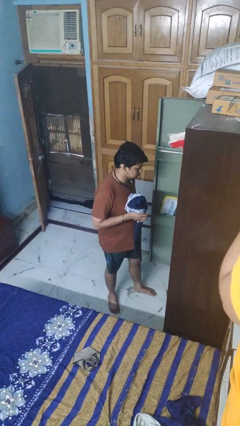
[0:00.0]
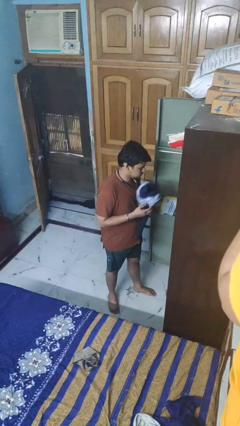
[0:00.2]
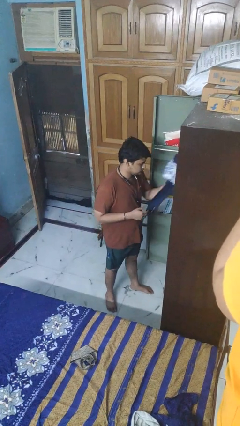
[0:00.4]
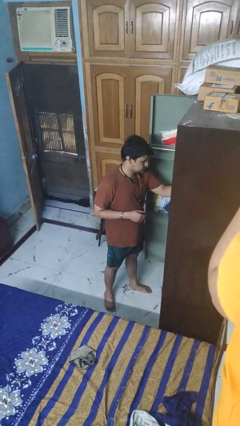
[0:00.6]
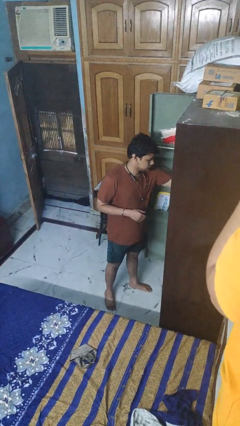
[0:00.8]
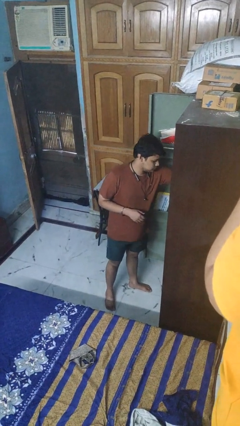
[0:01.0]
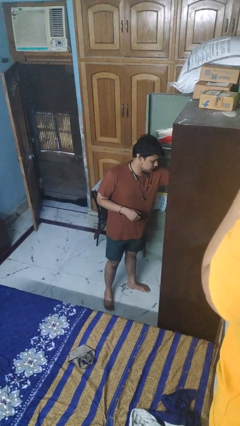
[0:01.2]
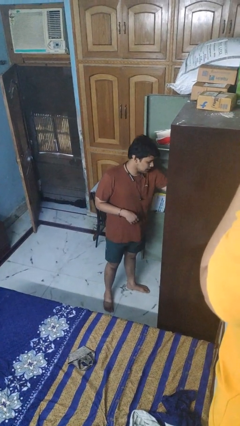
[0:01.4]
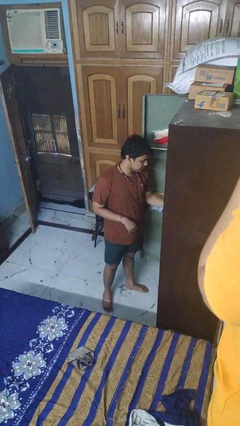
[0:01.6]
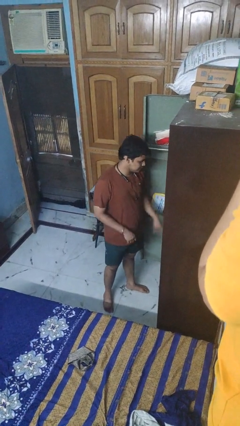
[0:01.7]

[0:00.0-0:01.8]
person puts clothes into dresser

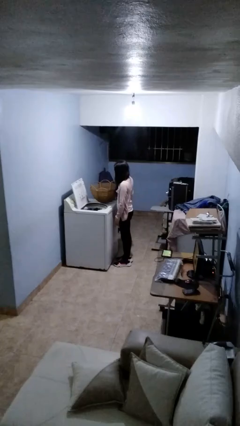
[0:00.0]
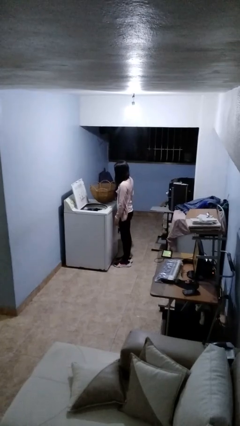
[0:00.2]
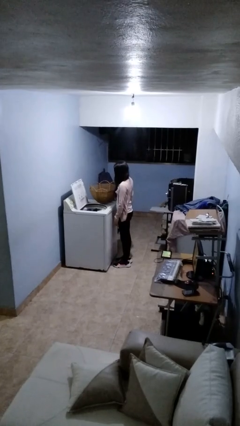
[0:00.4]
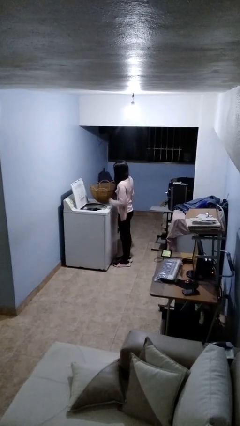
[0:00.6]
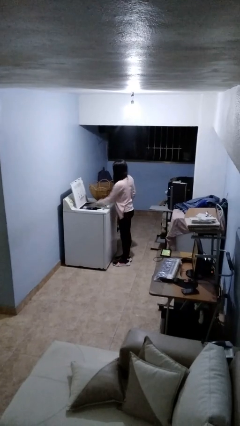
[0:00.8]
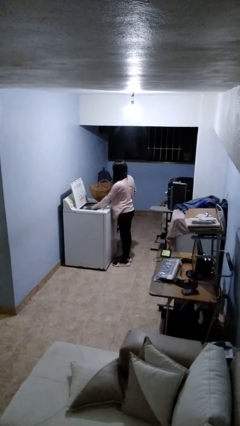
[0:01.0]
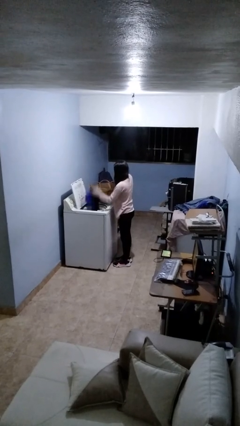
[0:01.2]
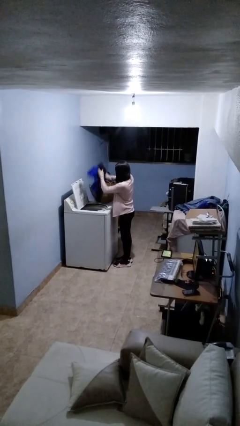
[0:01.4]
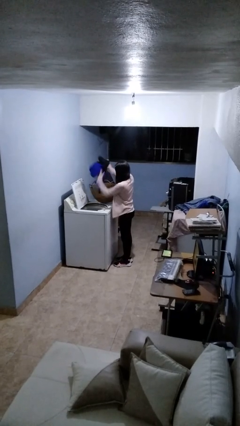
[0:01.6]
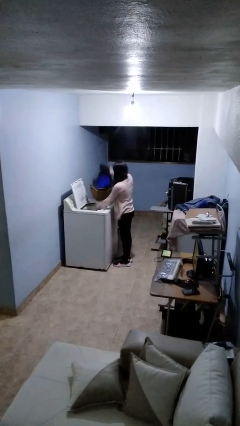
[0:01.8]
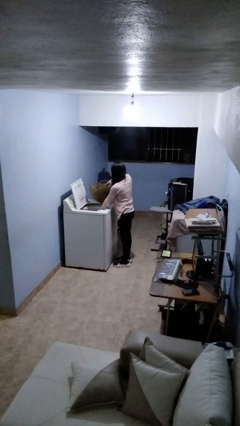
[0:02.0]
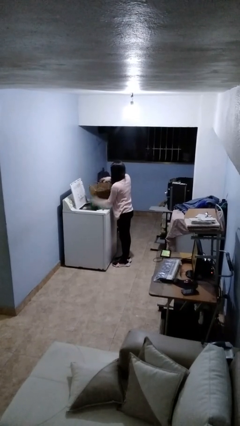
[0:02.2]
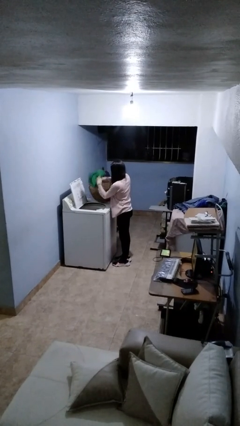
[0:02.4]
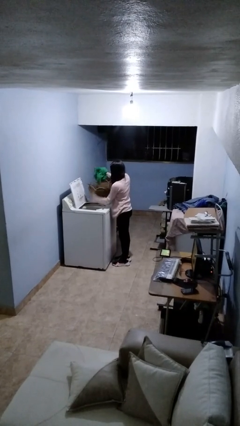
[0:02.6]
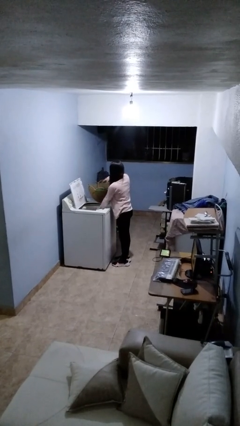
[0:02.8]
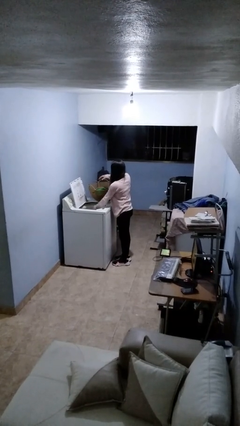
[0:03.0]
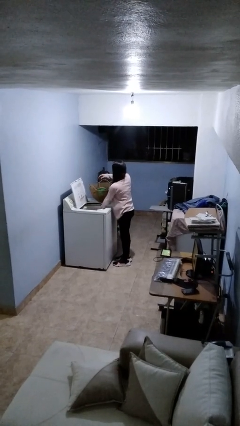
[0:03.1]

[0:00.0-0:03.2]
person loads clotheswasher

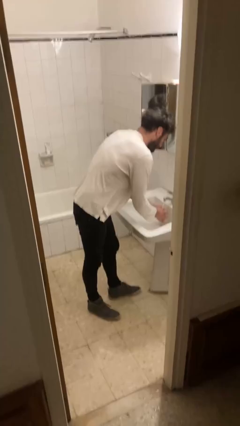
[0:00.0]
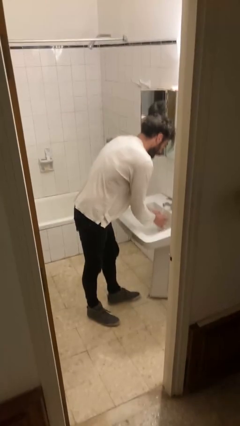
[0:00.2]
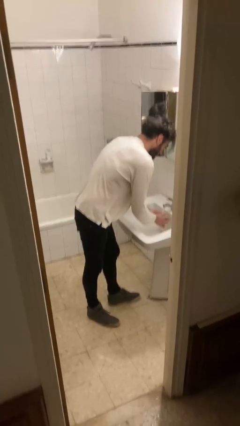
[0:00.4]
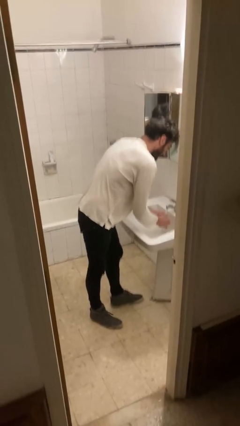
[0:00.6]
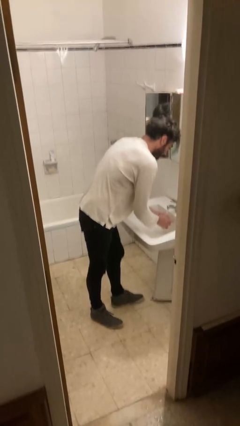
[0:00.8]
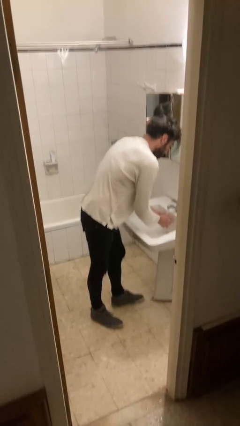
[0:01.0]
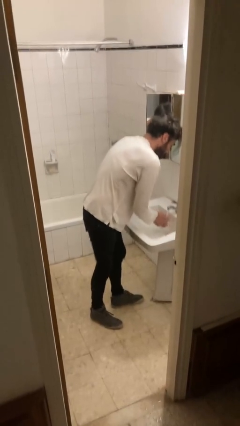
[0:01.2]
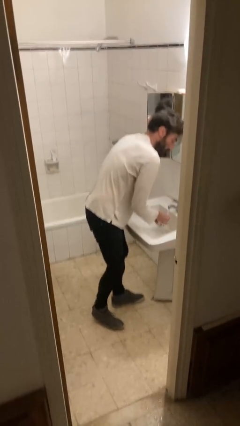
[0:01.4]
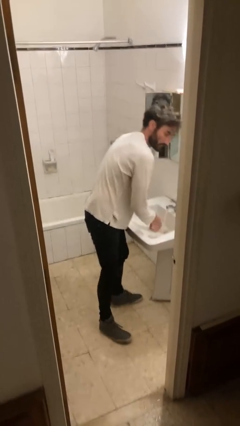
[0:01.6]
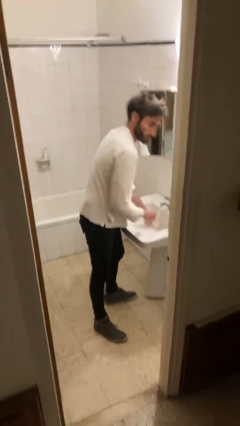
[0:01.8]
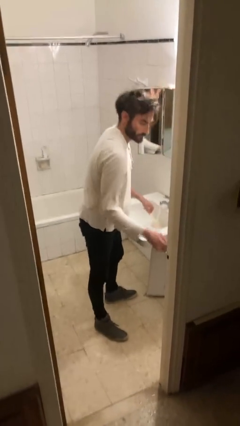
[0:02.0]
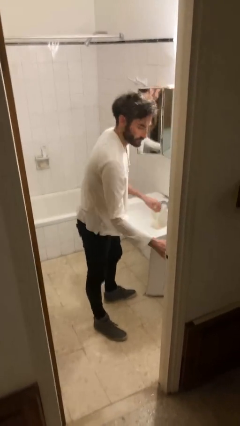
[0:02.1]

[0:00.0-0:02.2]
person washes hands

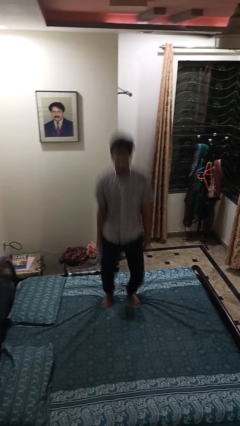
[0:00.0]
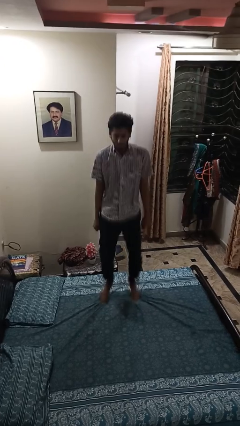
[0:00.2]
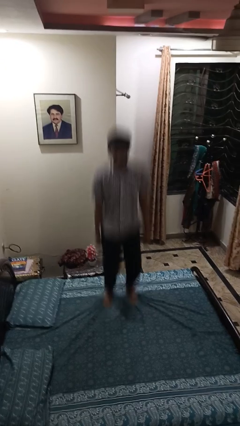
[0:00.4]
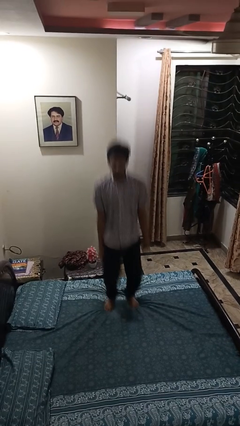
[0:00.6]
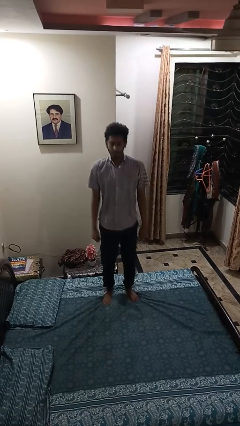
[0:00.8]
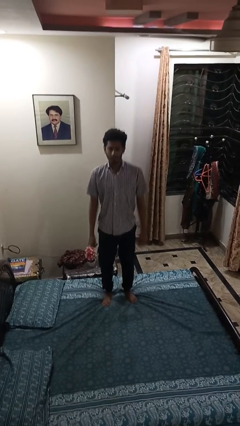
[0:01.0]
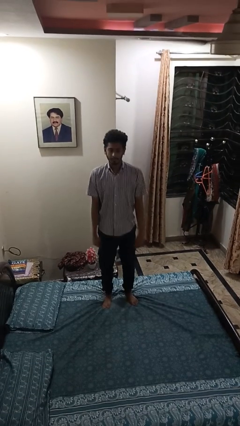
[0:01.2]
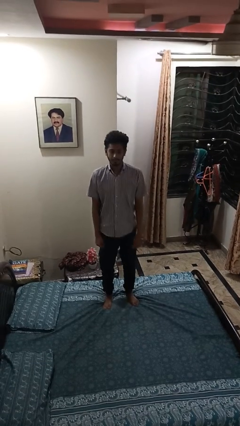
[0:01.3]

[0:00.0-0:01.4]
person jumps on bed

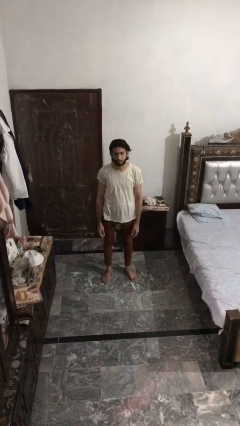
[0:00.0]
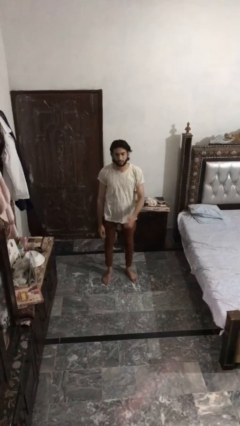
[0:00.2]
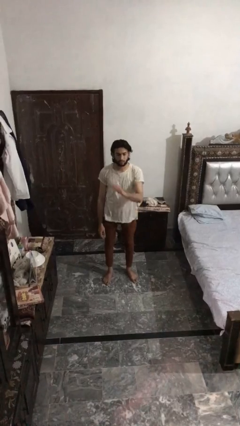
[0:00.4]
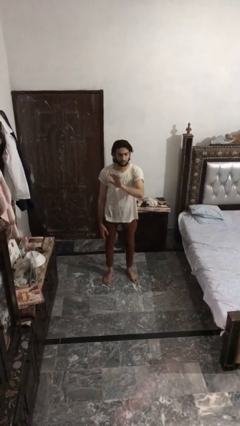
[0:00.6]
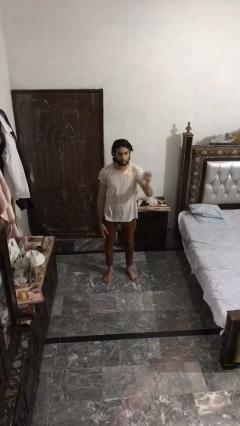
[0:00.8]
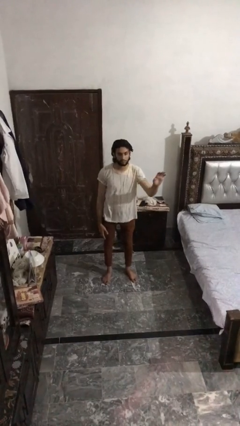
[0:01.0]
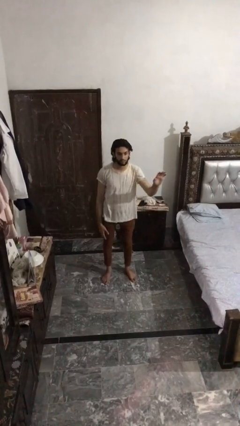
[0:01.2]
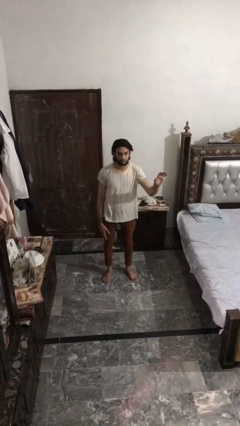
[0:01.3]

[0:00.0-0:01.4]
person gestures swipe left

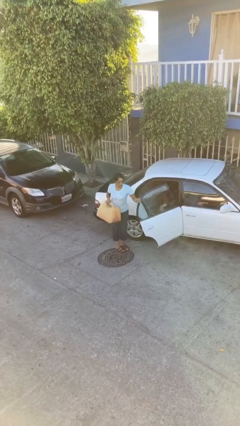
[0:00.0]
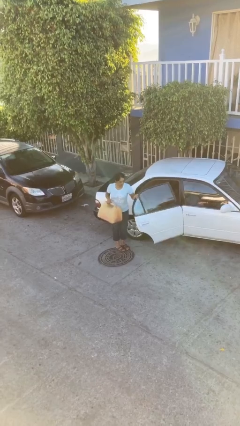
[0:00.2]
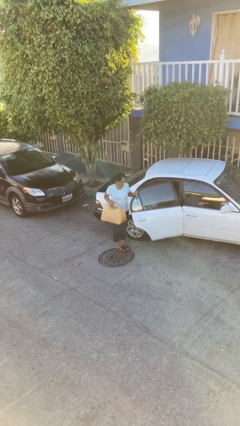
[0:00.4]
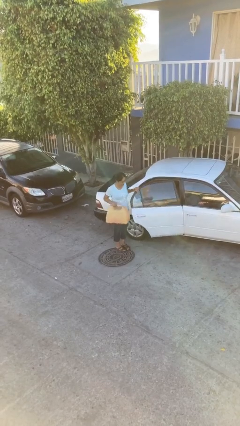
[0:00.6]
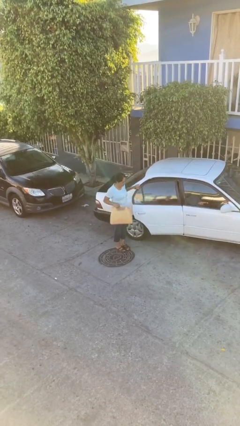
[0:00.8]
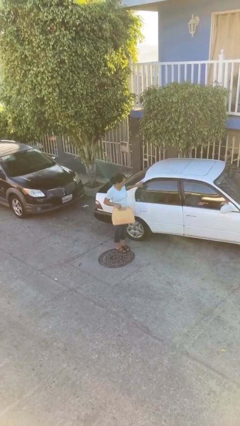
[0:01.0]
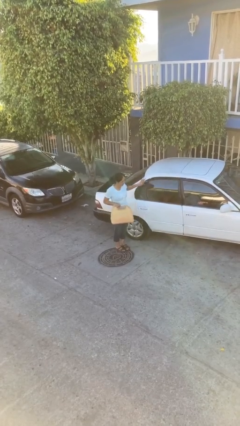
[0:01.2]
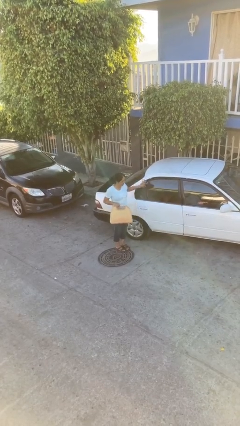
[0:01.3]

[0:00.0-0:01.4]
person closes car door

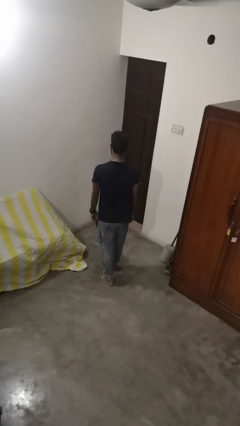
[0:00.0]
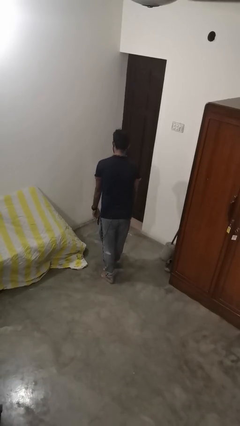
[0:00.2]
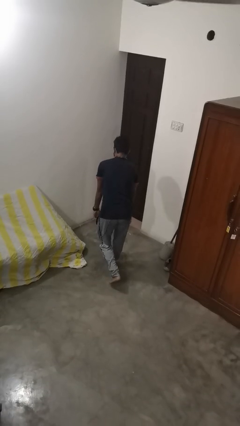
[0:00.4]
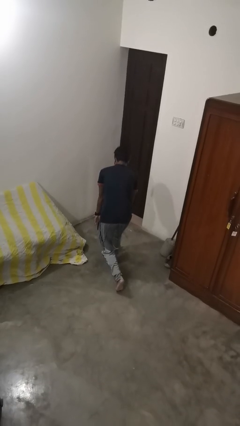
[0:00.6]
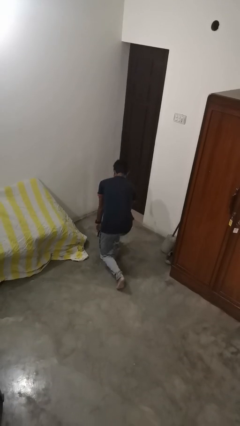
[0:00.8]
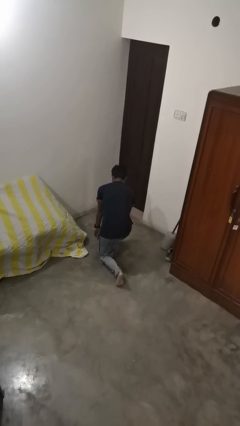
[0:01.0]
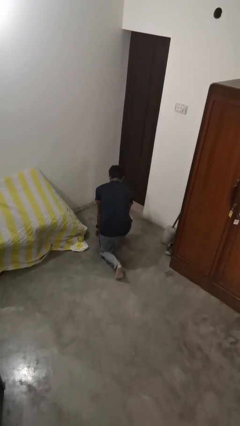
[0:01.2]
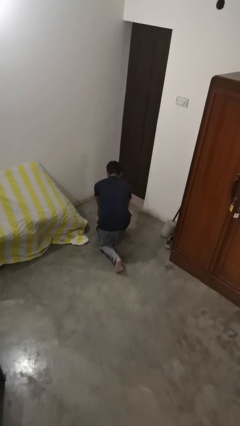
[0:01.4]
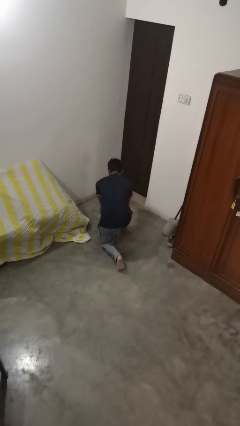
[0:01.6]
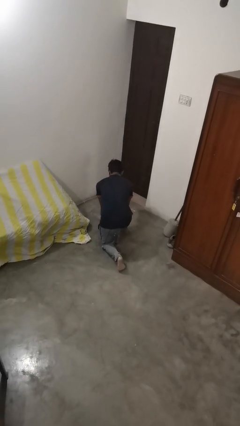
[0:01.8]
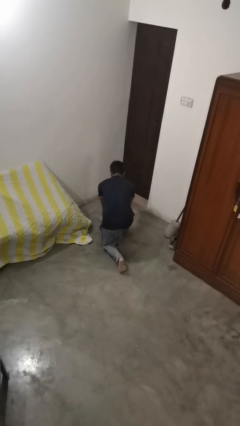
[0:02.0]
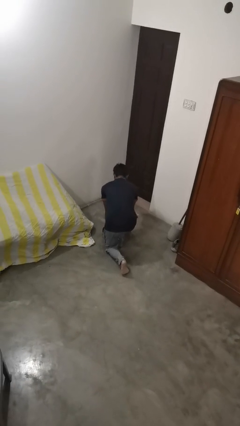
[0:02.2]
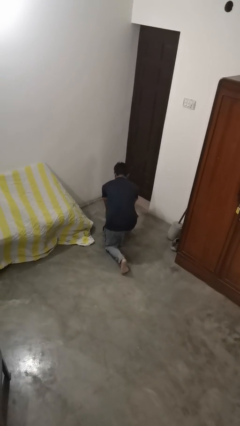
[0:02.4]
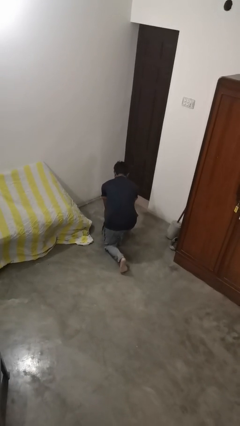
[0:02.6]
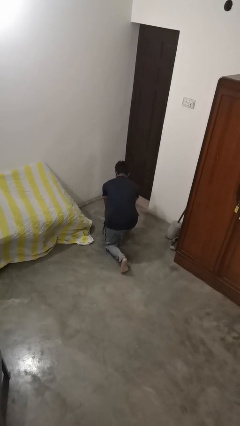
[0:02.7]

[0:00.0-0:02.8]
person kneels

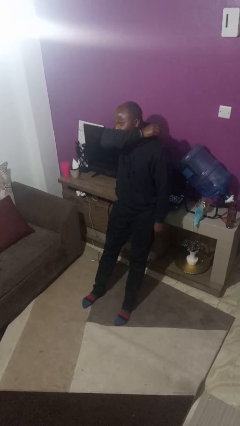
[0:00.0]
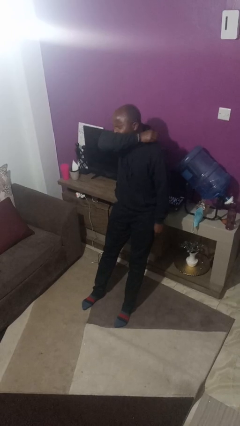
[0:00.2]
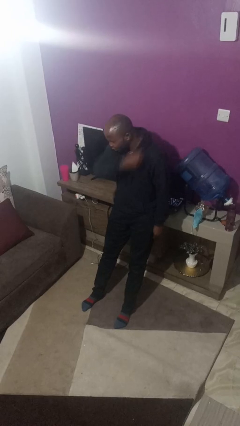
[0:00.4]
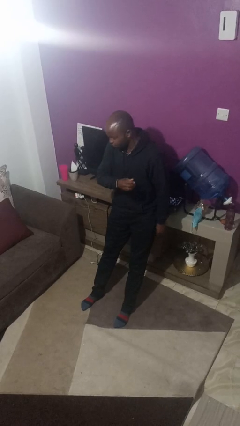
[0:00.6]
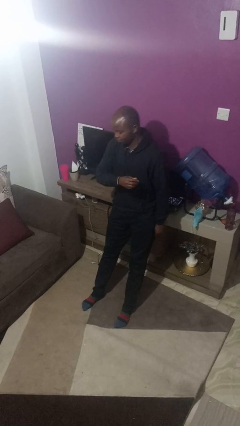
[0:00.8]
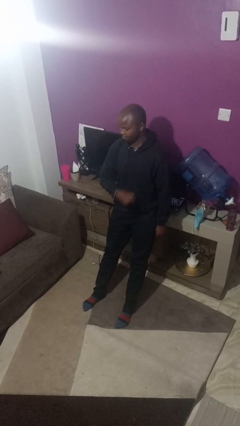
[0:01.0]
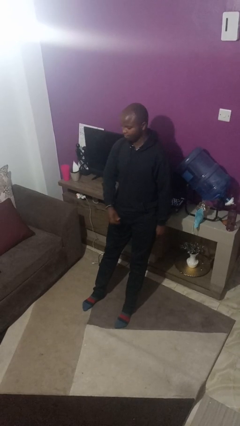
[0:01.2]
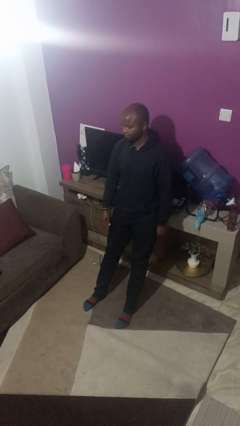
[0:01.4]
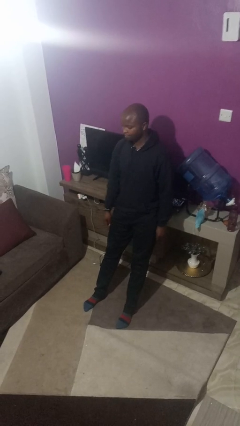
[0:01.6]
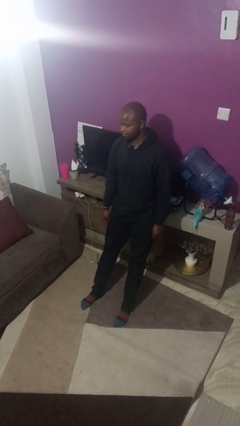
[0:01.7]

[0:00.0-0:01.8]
person sneezes into hand

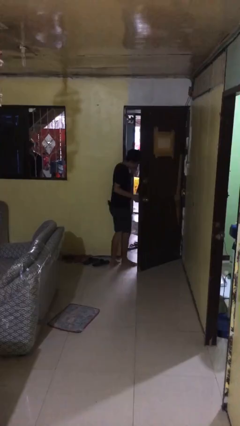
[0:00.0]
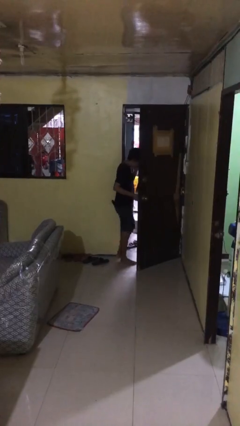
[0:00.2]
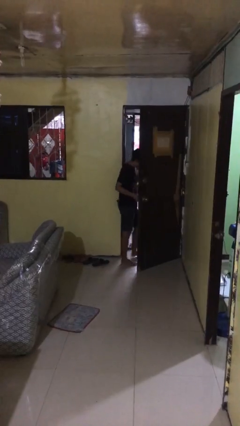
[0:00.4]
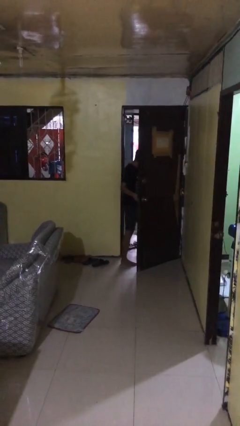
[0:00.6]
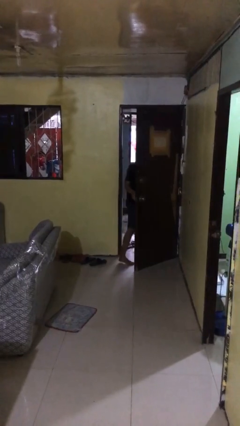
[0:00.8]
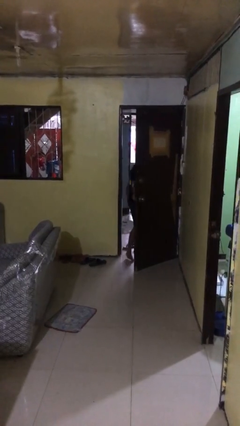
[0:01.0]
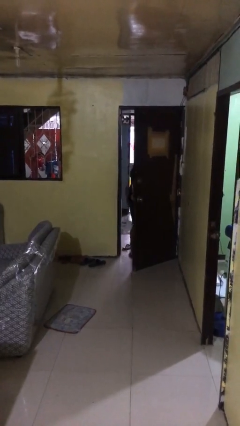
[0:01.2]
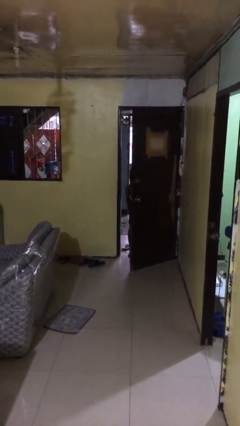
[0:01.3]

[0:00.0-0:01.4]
person exits scene through structure
